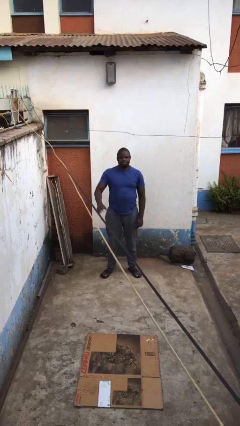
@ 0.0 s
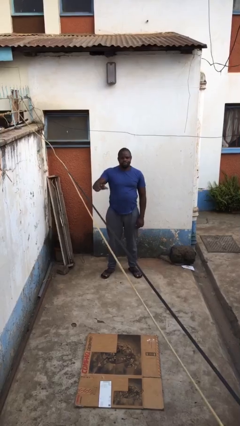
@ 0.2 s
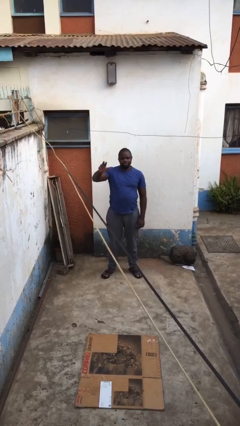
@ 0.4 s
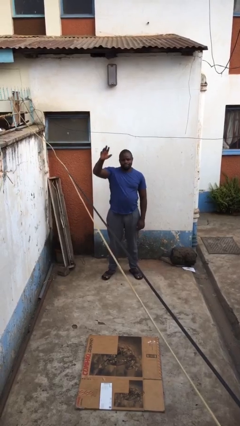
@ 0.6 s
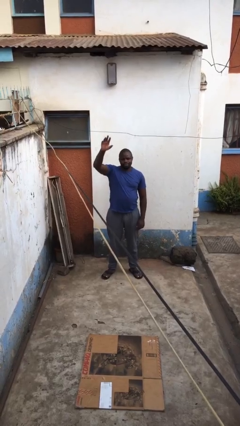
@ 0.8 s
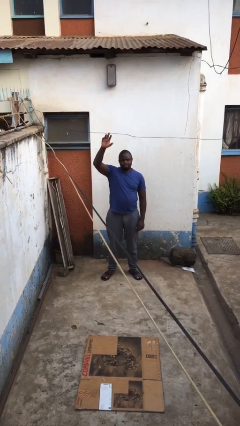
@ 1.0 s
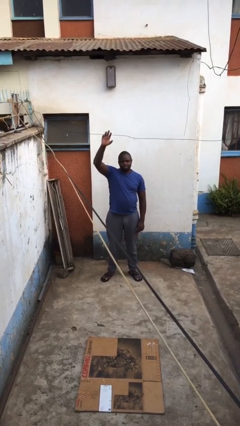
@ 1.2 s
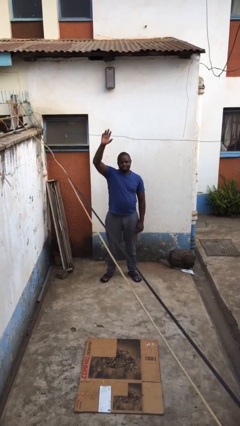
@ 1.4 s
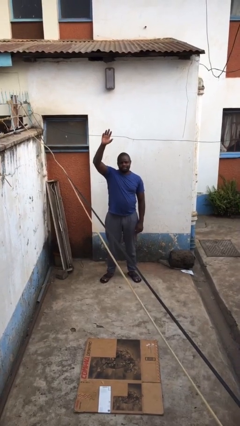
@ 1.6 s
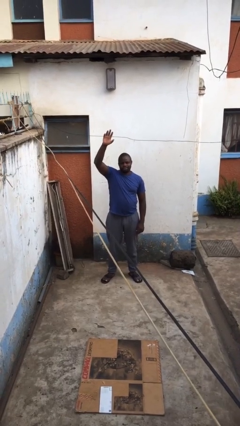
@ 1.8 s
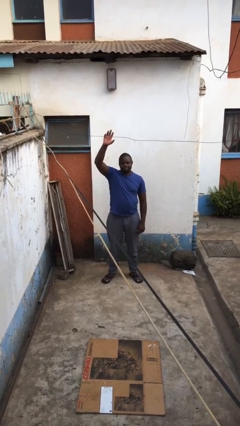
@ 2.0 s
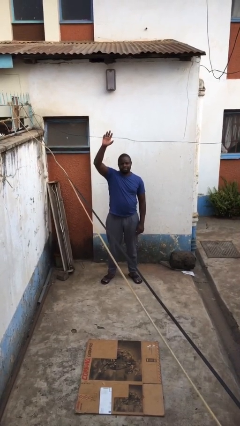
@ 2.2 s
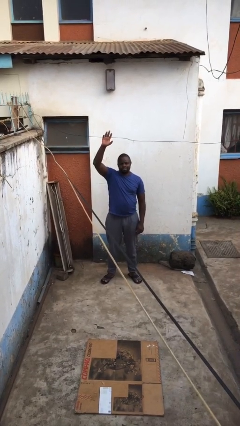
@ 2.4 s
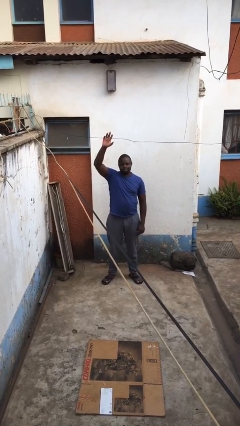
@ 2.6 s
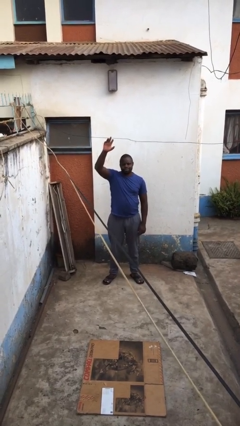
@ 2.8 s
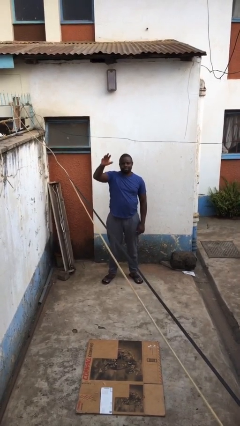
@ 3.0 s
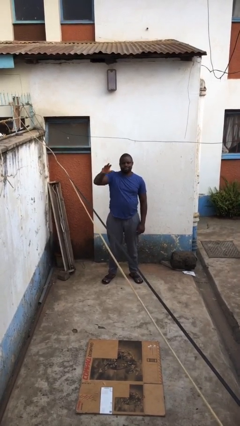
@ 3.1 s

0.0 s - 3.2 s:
person gestures raise hand

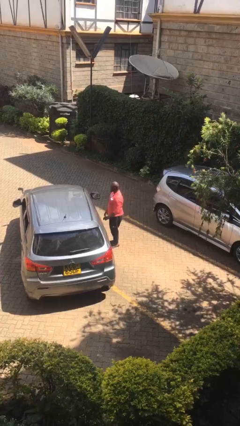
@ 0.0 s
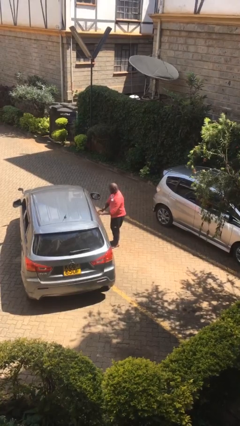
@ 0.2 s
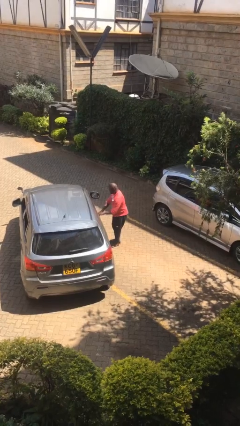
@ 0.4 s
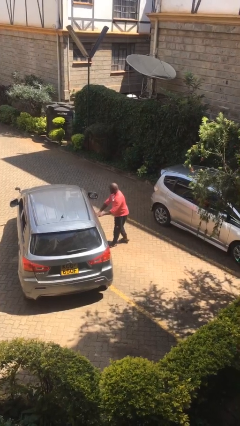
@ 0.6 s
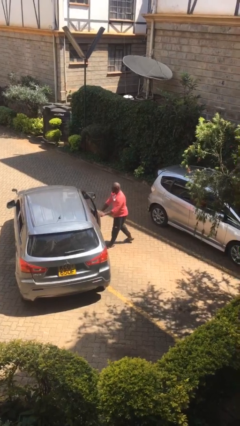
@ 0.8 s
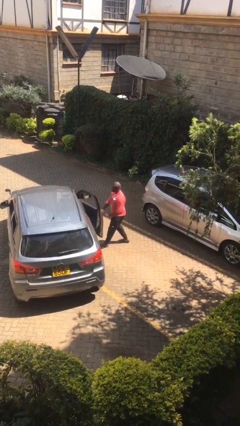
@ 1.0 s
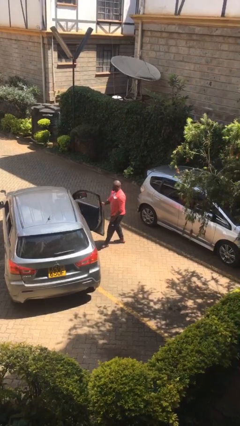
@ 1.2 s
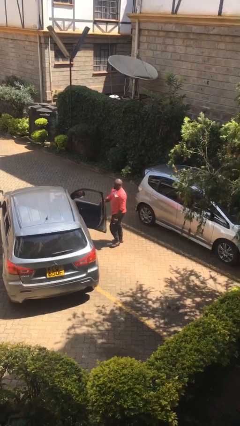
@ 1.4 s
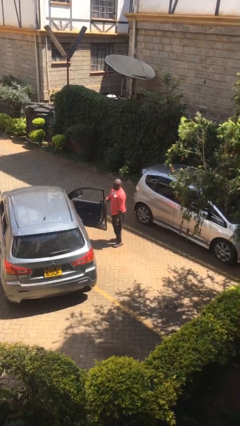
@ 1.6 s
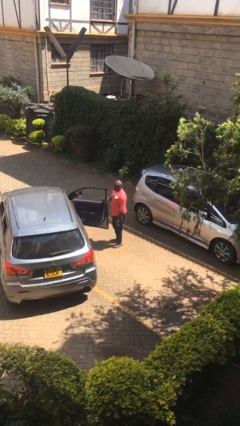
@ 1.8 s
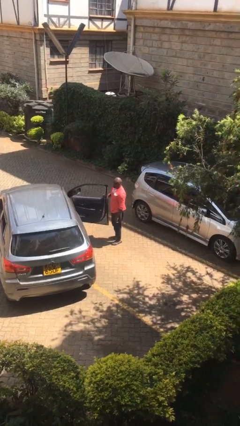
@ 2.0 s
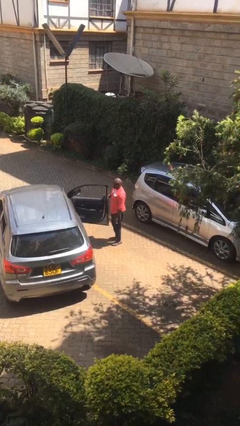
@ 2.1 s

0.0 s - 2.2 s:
person opens car door

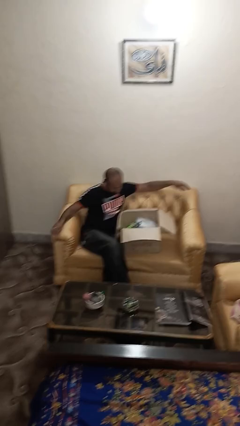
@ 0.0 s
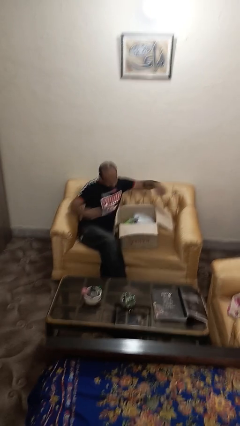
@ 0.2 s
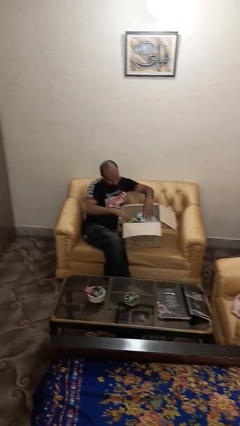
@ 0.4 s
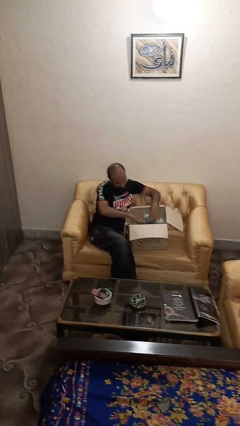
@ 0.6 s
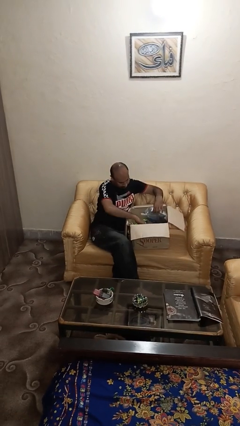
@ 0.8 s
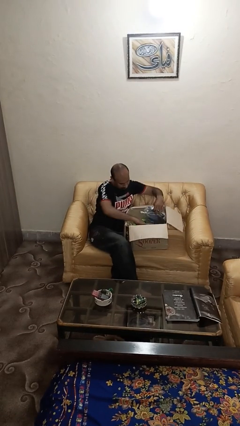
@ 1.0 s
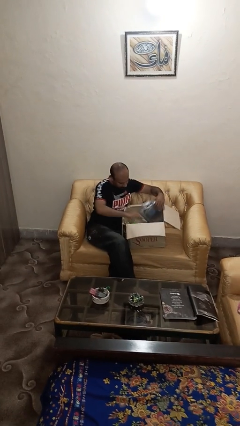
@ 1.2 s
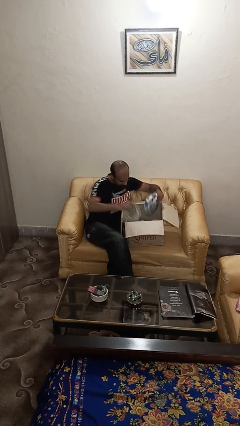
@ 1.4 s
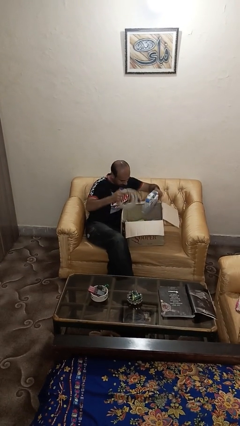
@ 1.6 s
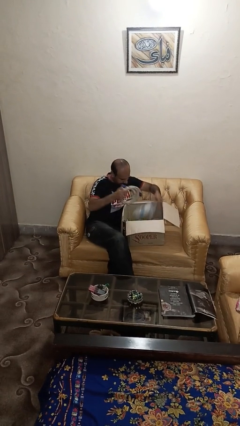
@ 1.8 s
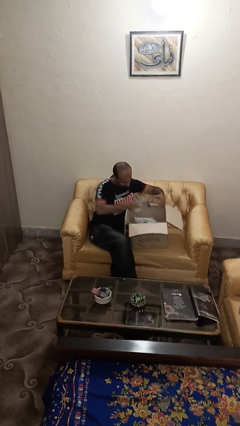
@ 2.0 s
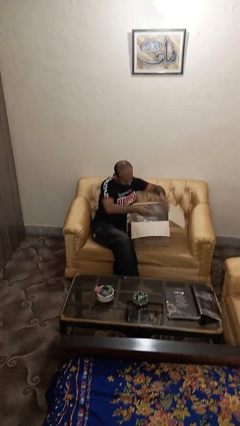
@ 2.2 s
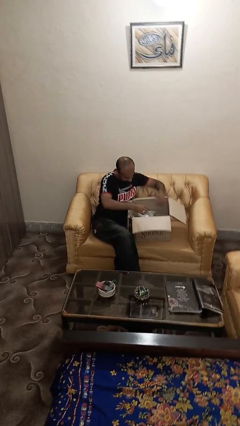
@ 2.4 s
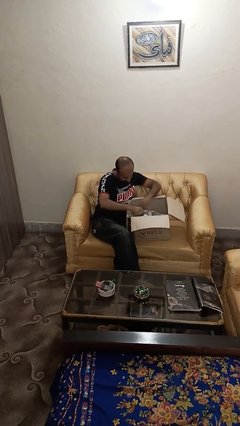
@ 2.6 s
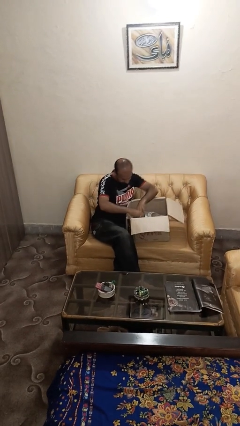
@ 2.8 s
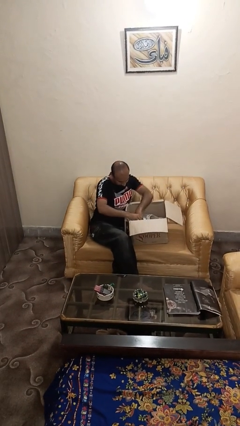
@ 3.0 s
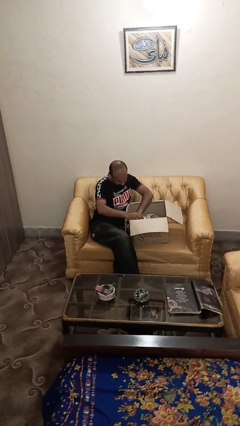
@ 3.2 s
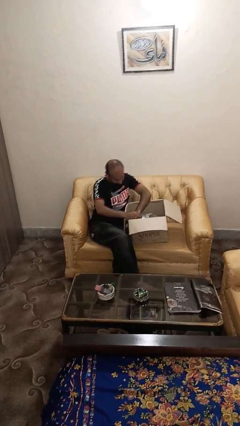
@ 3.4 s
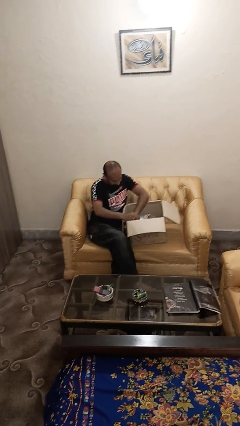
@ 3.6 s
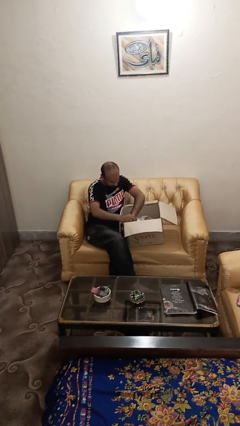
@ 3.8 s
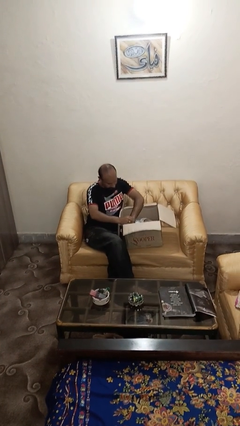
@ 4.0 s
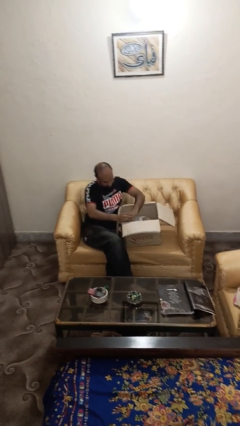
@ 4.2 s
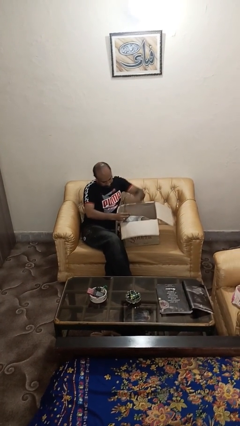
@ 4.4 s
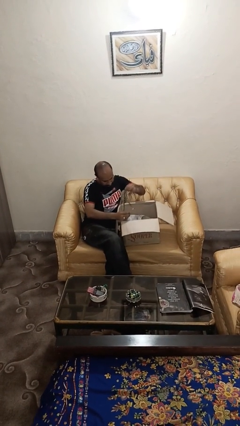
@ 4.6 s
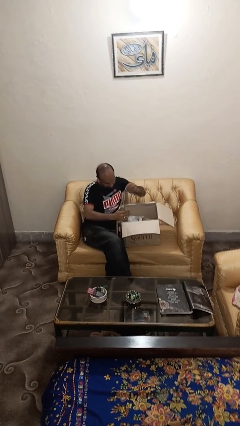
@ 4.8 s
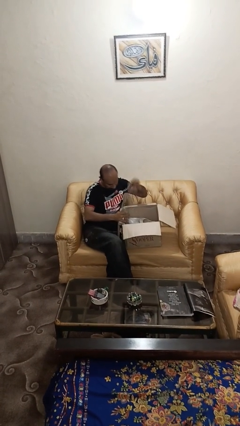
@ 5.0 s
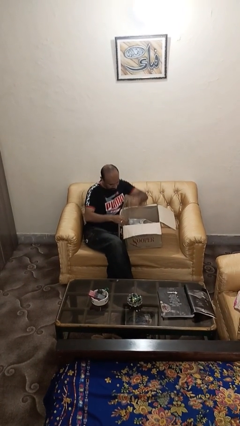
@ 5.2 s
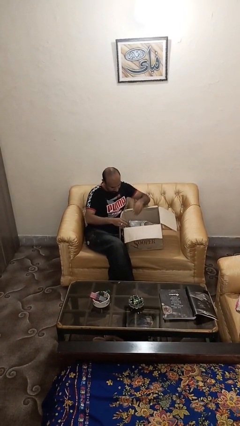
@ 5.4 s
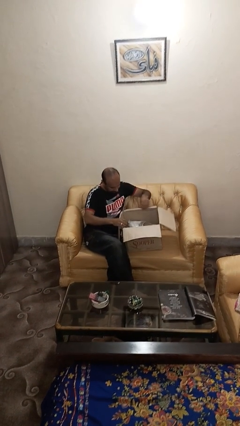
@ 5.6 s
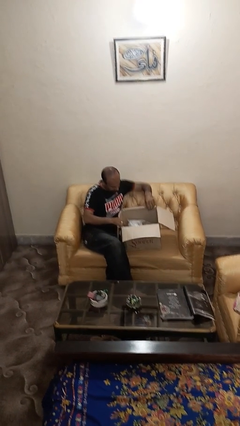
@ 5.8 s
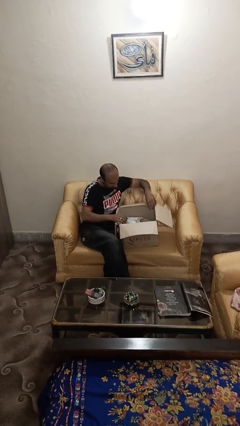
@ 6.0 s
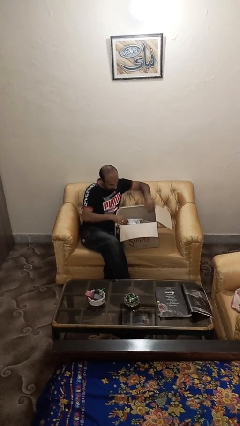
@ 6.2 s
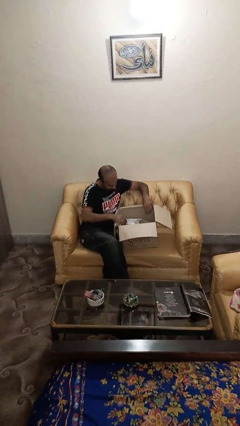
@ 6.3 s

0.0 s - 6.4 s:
person searches in box

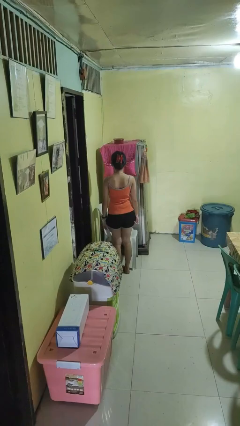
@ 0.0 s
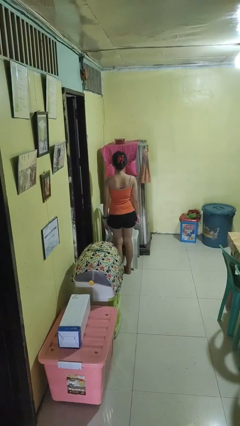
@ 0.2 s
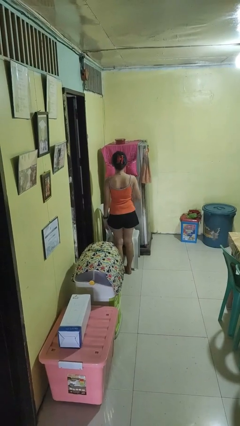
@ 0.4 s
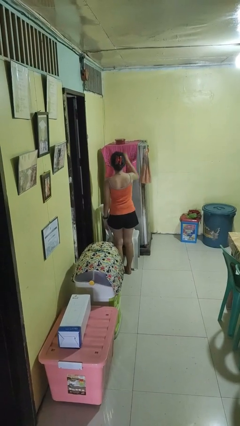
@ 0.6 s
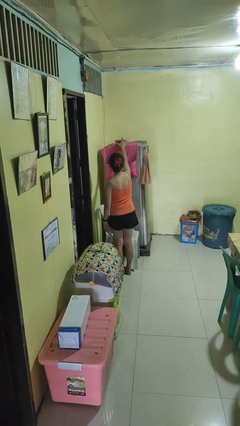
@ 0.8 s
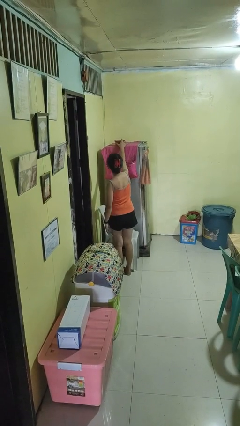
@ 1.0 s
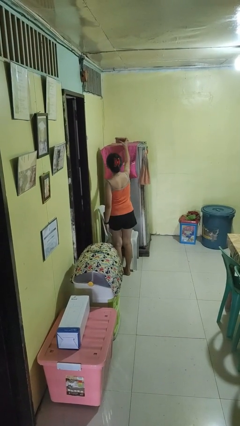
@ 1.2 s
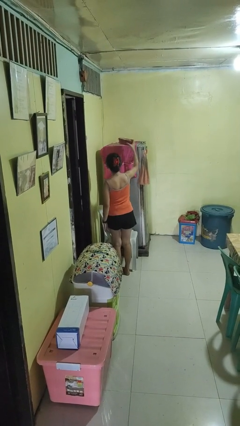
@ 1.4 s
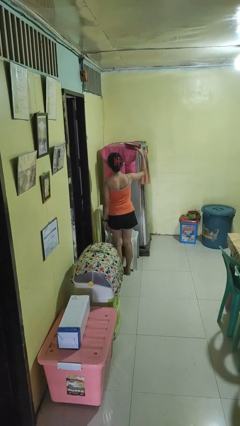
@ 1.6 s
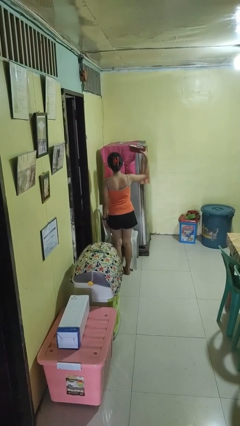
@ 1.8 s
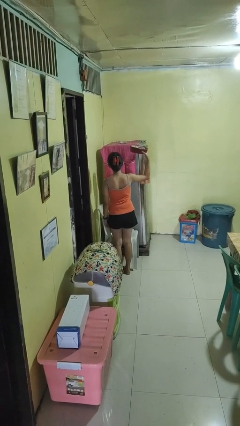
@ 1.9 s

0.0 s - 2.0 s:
person picks up object from shelf

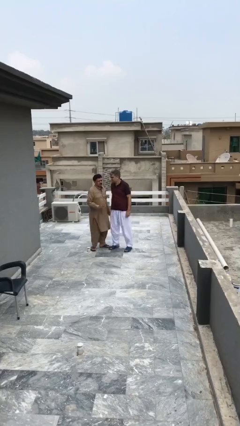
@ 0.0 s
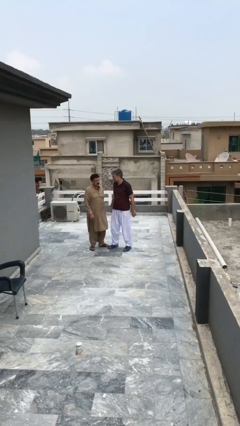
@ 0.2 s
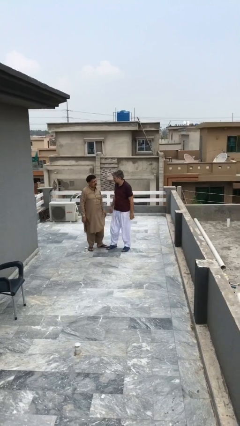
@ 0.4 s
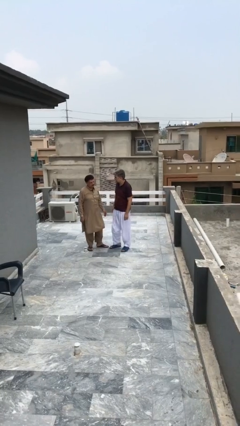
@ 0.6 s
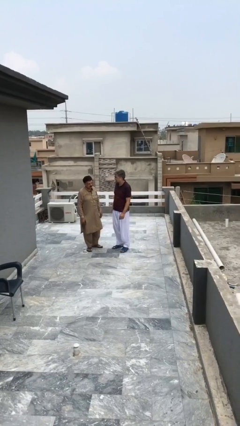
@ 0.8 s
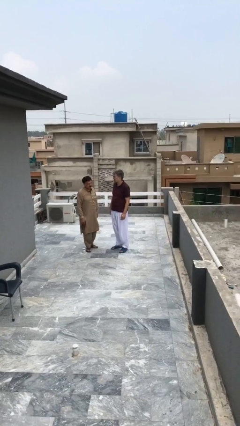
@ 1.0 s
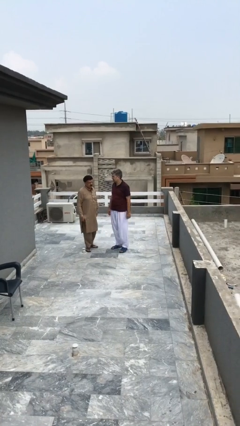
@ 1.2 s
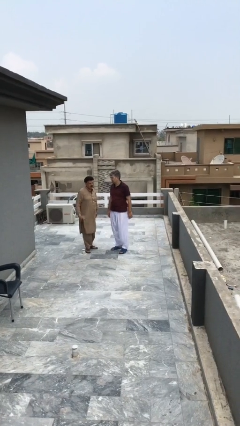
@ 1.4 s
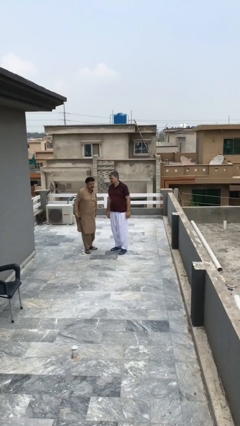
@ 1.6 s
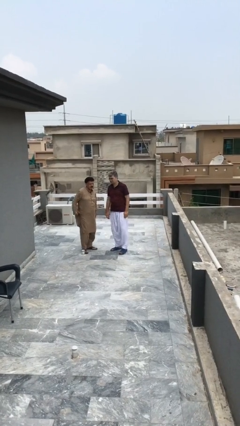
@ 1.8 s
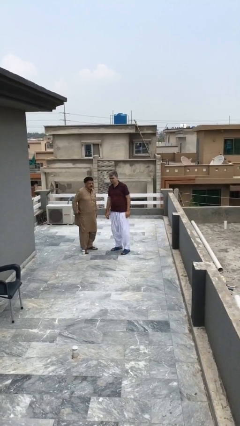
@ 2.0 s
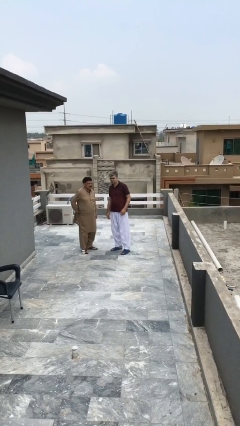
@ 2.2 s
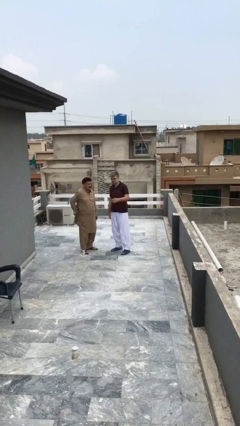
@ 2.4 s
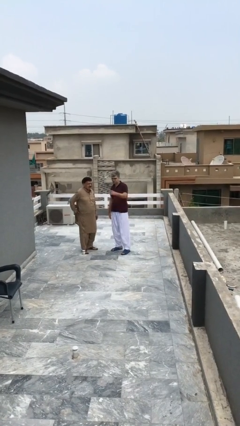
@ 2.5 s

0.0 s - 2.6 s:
person talks to person

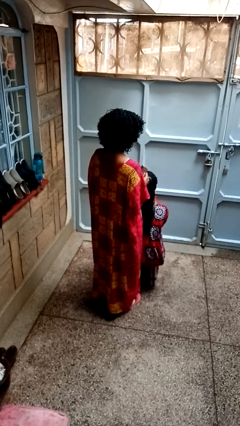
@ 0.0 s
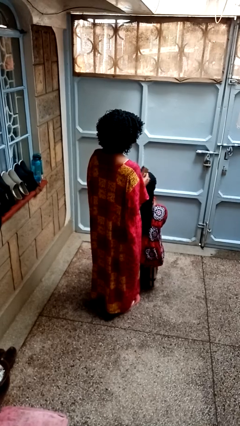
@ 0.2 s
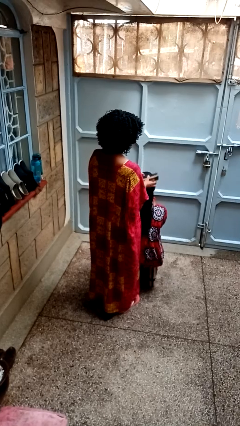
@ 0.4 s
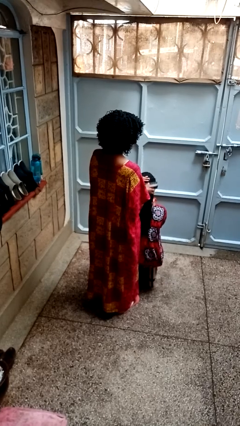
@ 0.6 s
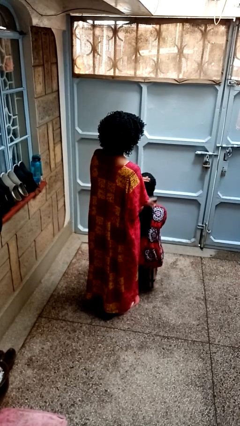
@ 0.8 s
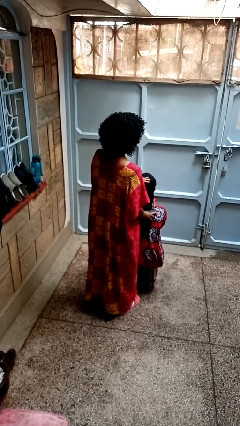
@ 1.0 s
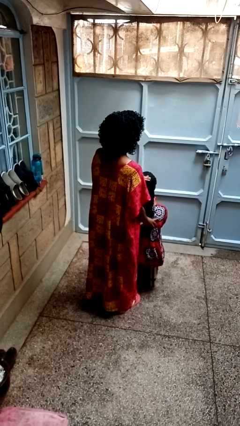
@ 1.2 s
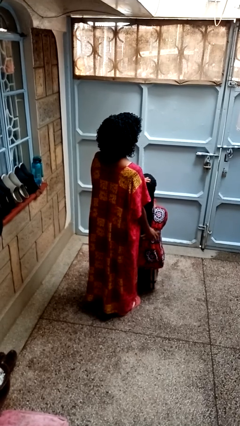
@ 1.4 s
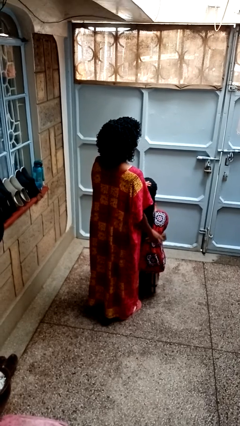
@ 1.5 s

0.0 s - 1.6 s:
person brushes hair of person
